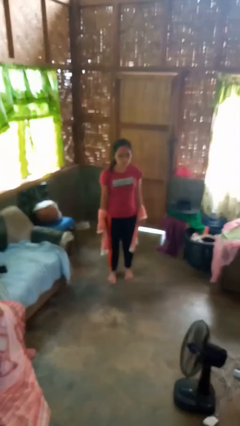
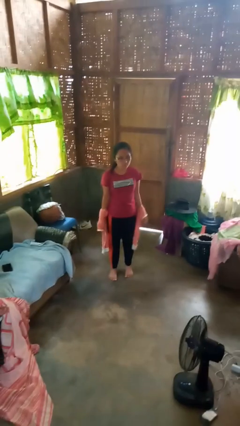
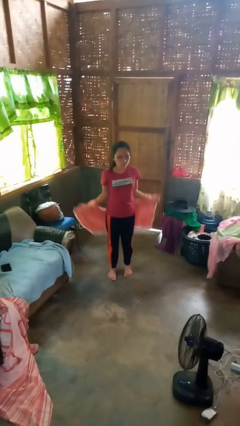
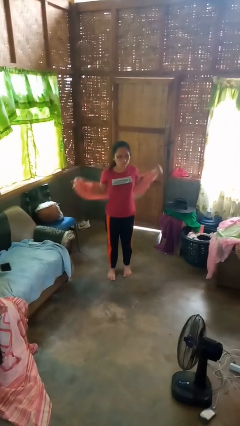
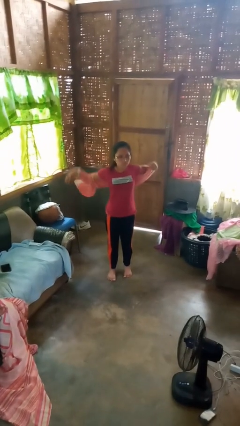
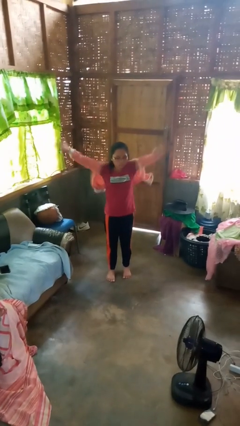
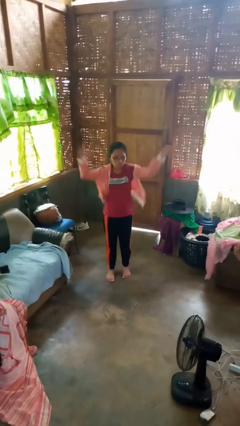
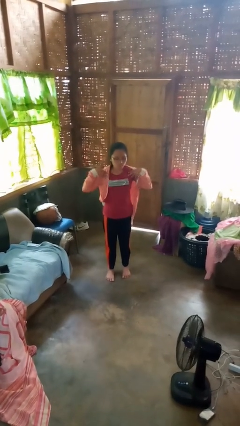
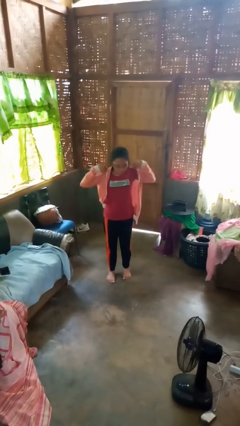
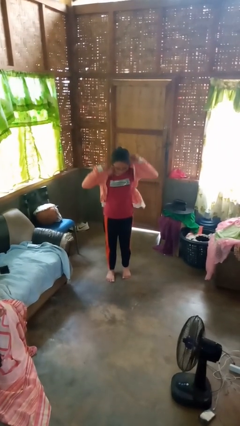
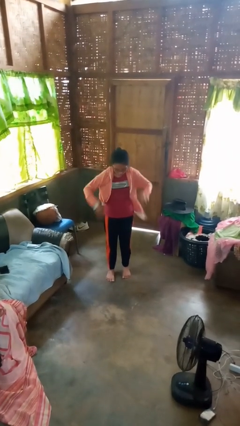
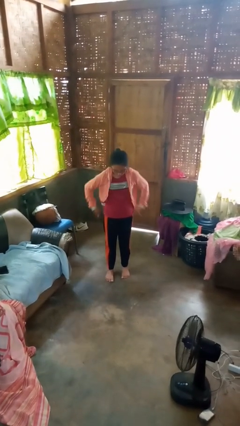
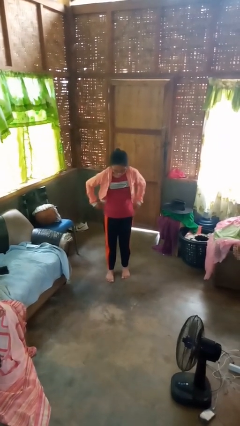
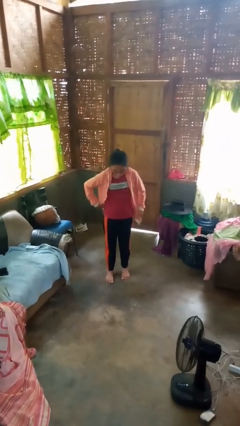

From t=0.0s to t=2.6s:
person puts on jacket

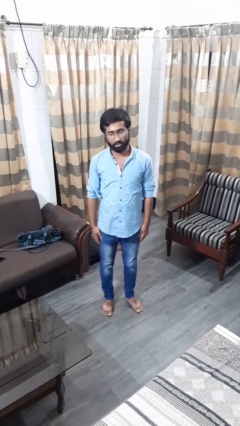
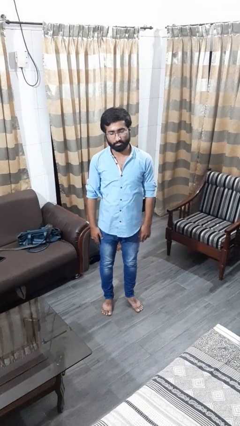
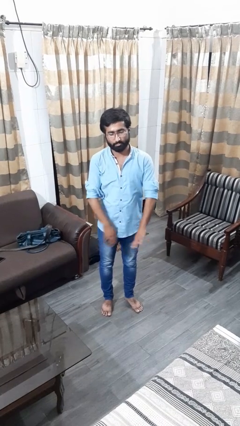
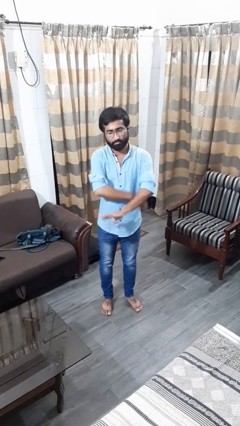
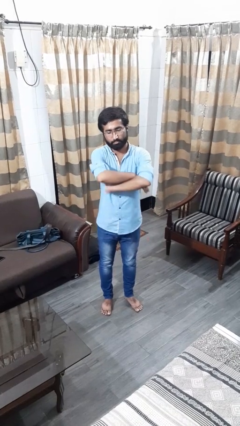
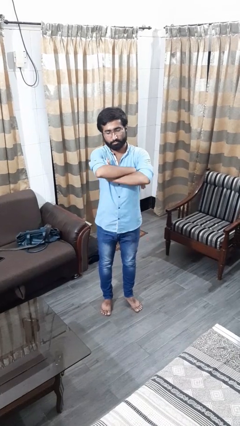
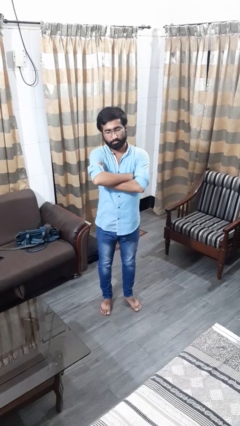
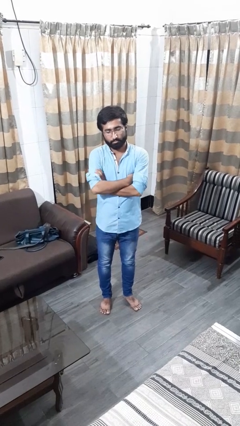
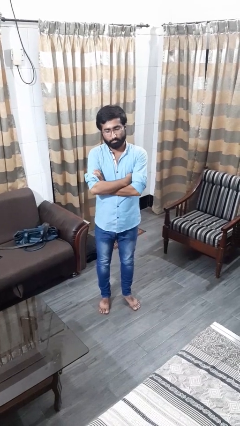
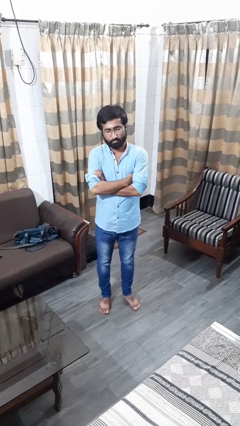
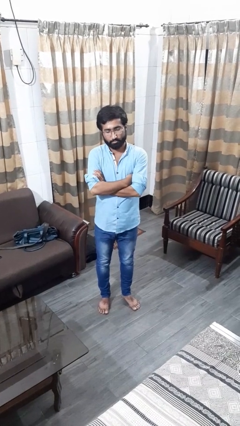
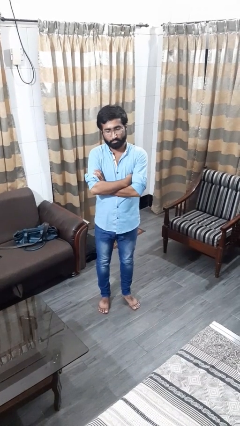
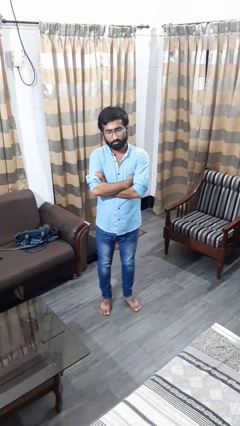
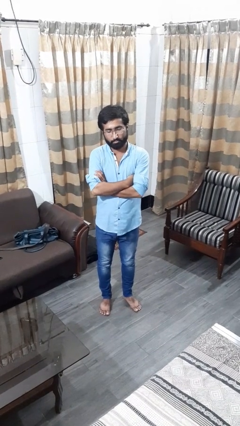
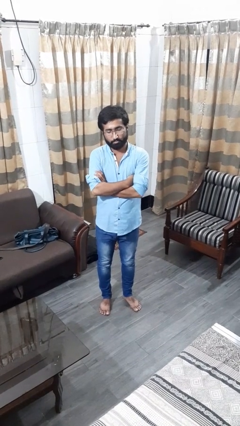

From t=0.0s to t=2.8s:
person crosses arms

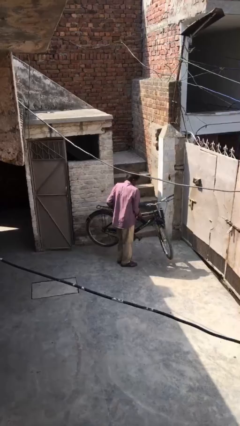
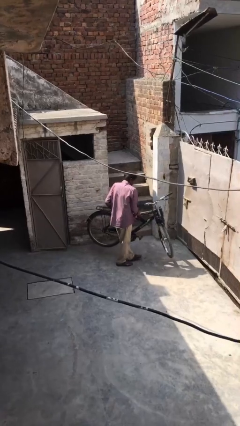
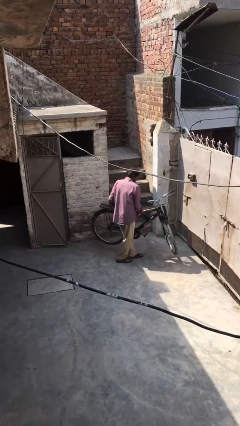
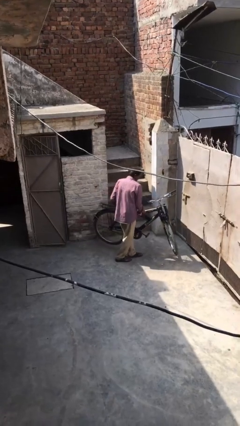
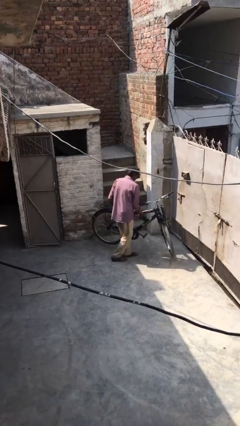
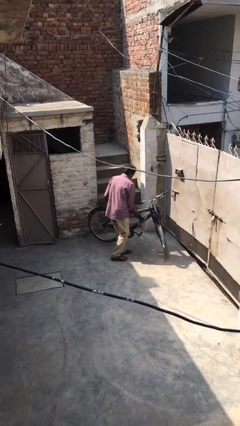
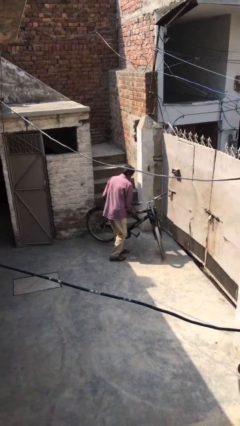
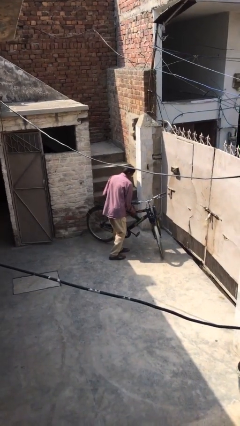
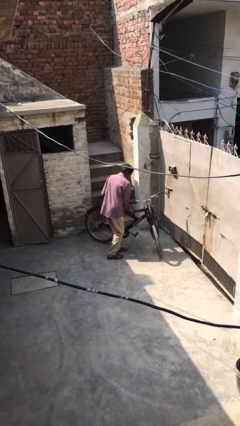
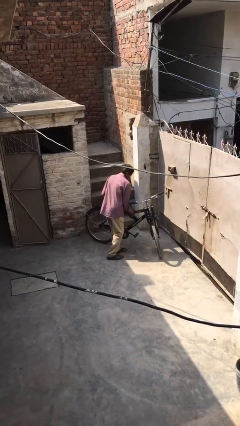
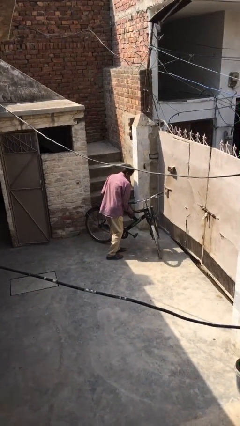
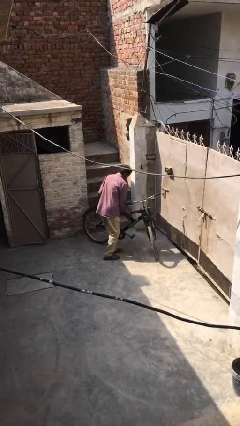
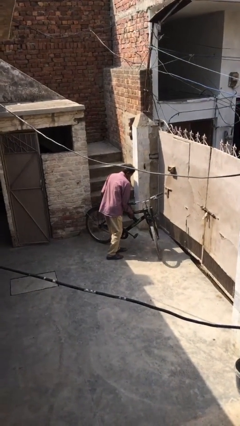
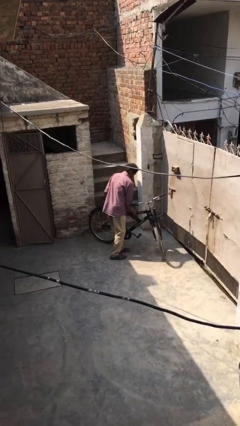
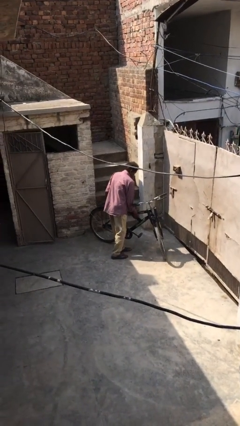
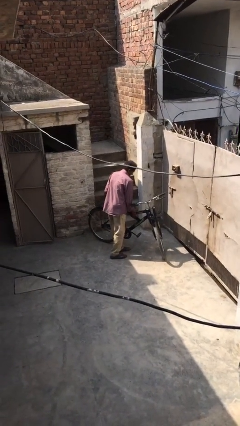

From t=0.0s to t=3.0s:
person puts down object on floor

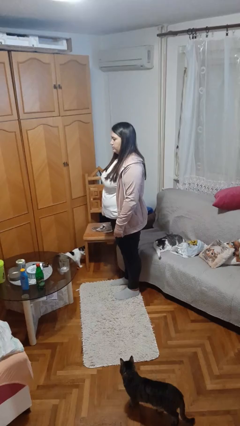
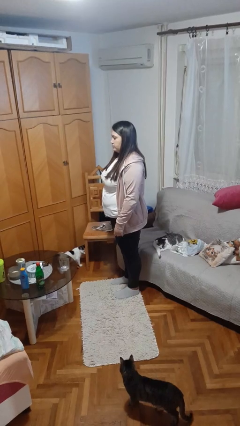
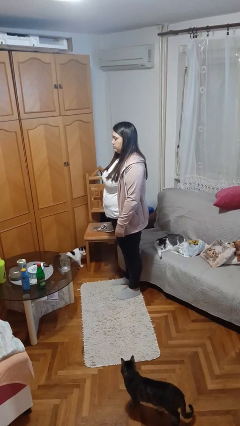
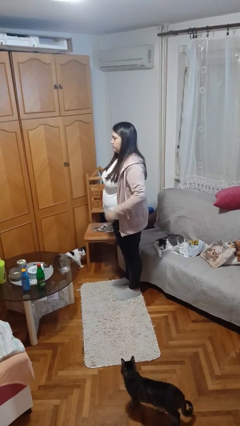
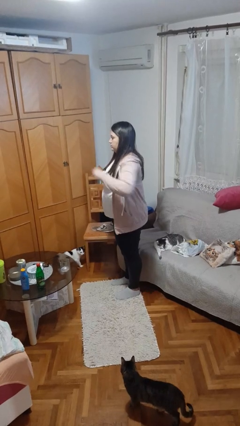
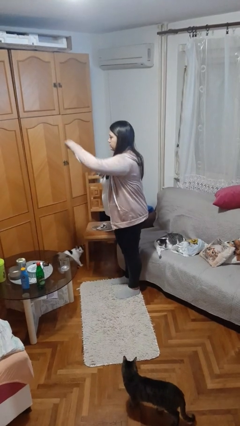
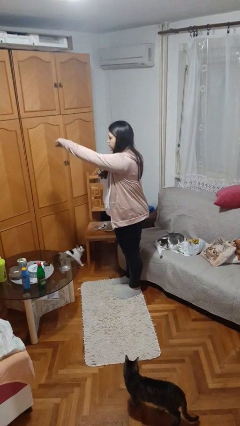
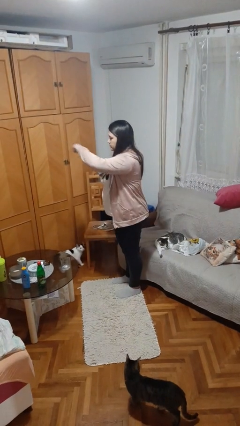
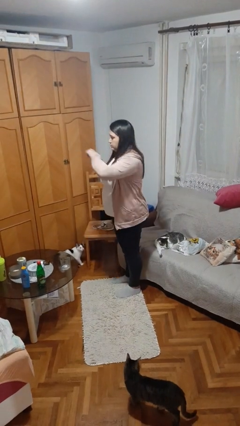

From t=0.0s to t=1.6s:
person punches

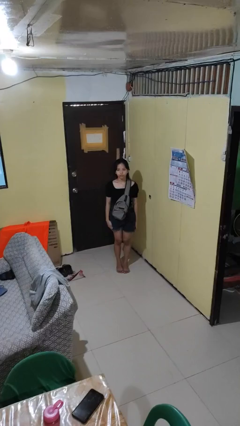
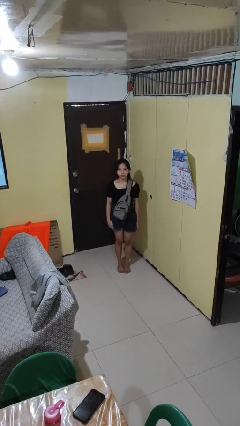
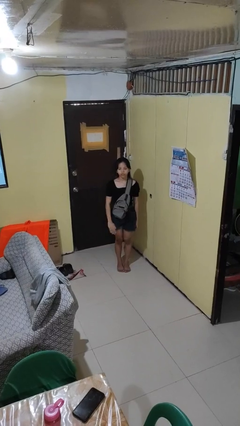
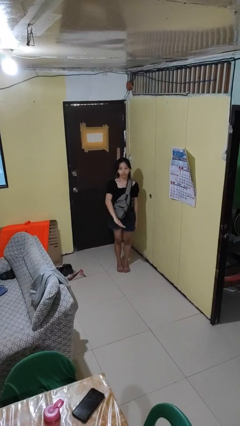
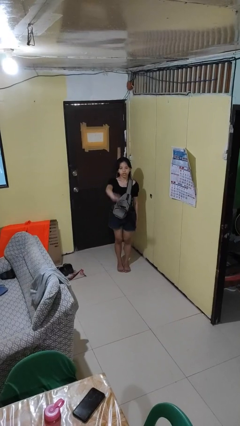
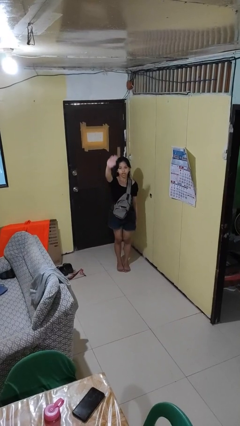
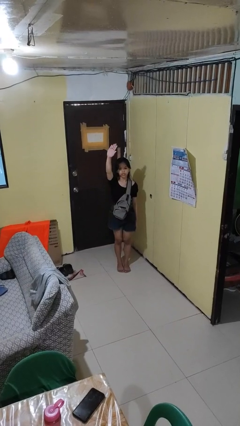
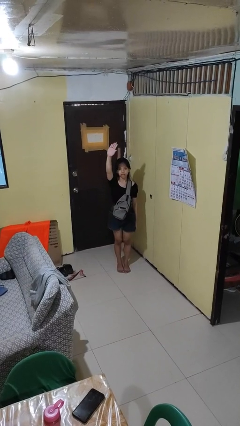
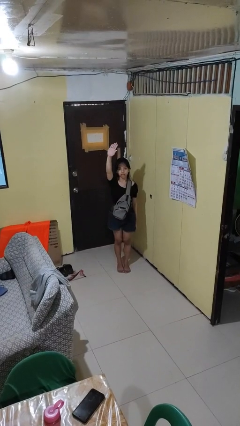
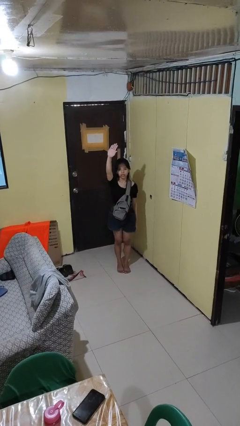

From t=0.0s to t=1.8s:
person gestures swipe up

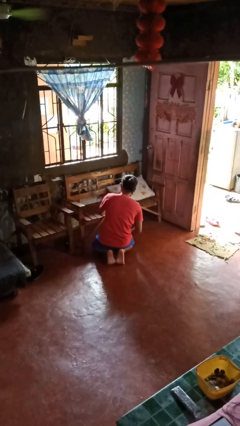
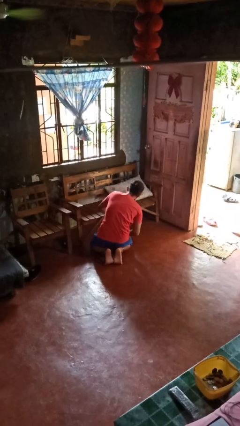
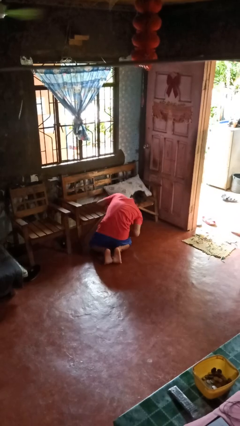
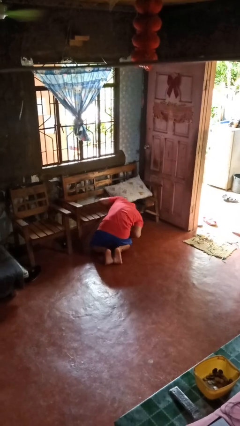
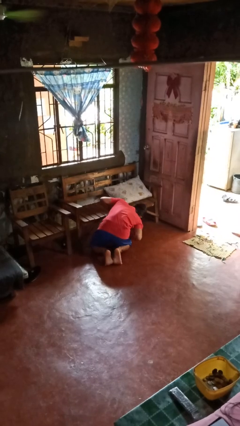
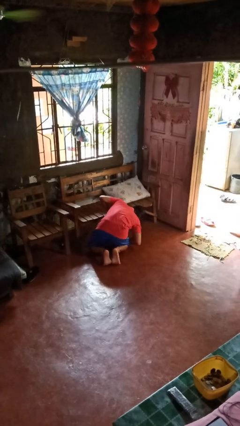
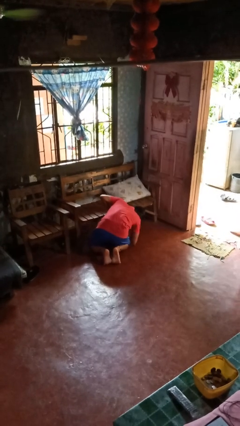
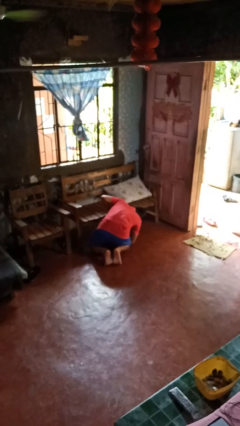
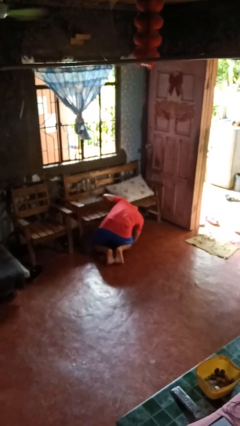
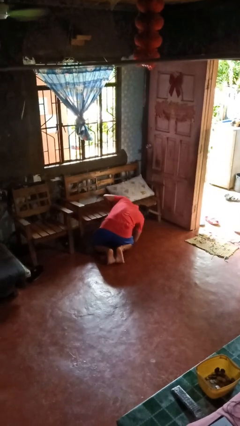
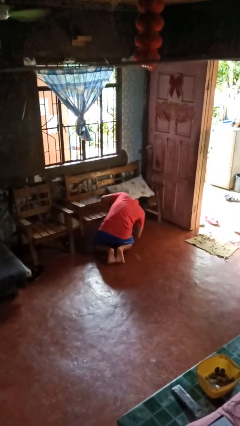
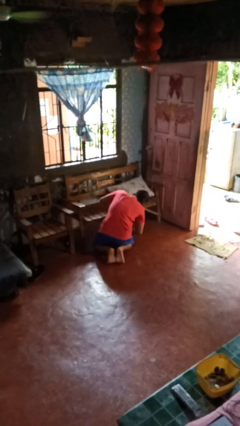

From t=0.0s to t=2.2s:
person searches in couch

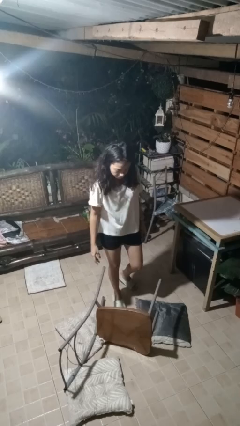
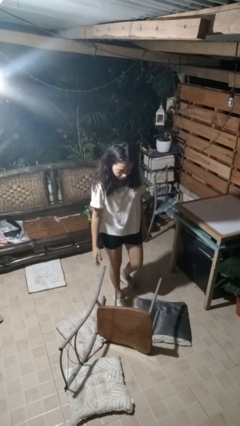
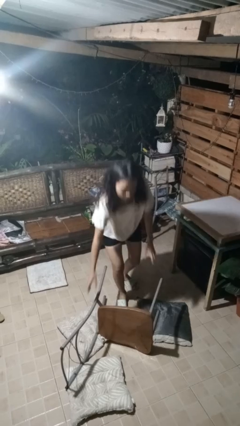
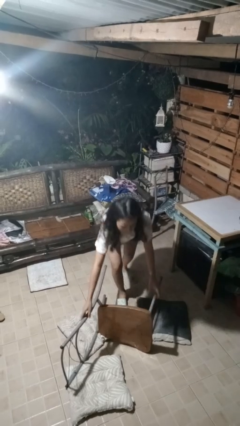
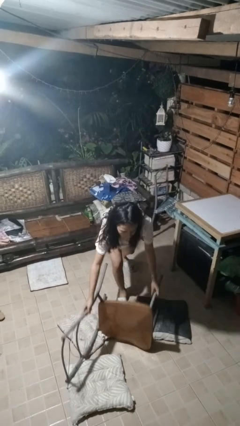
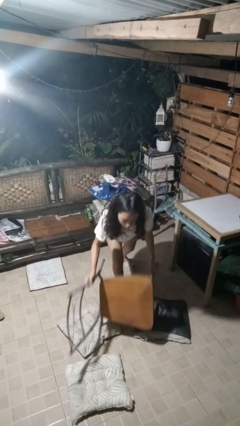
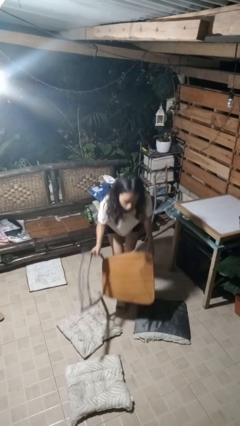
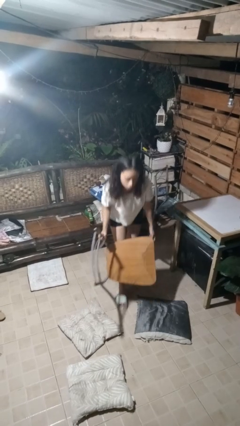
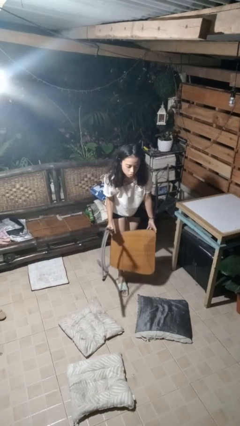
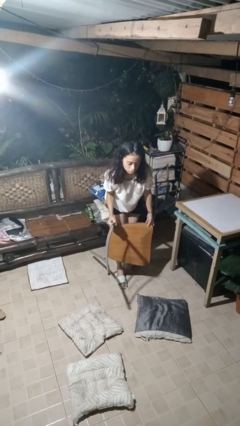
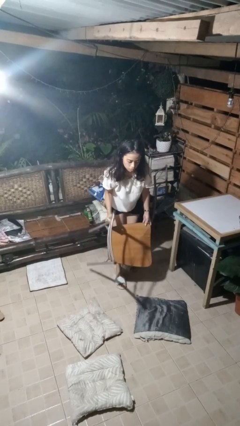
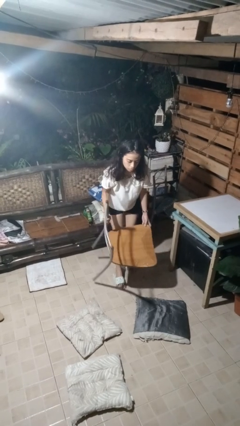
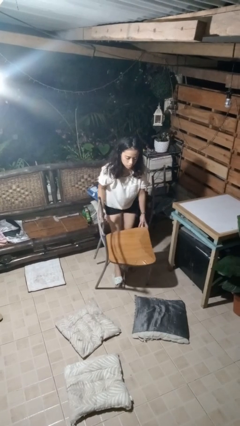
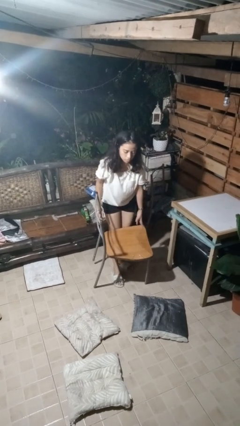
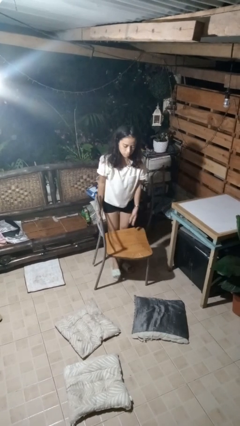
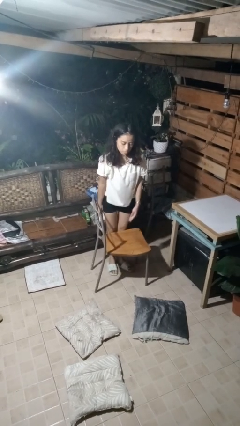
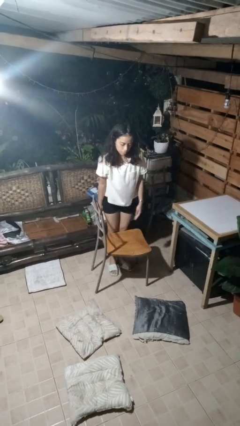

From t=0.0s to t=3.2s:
person sets upright furniture

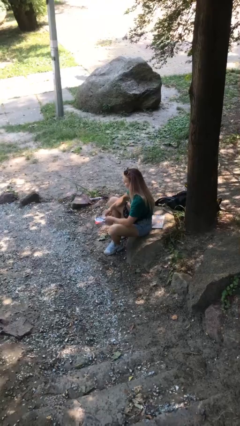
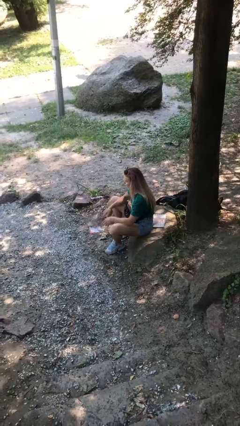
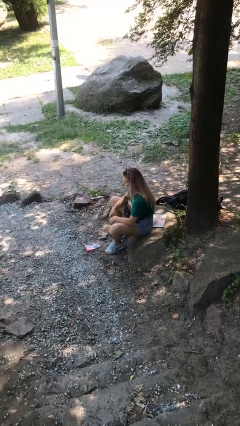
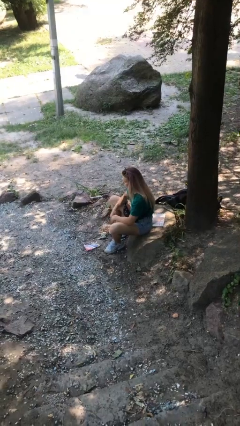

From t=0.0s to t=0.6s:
person drops object
